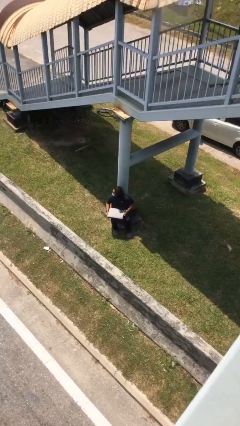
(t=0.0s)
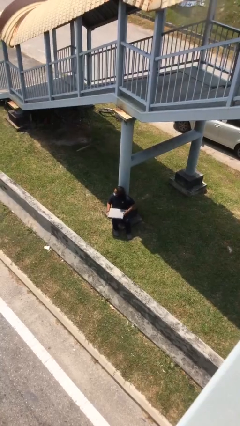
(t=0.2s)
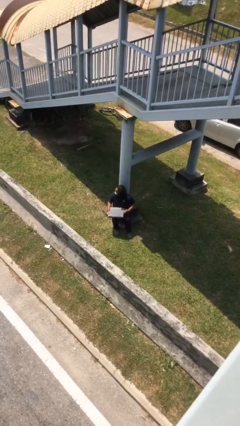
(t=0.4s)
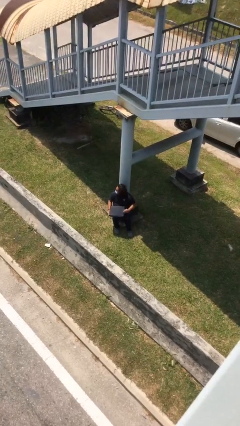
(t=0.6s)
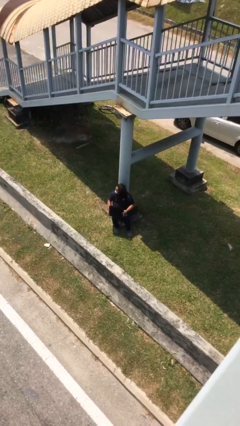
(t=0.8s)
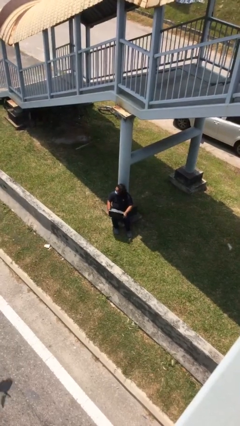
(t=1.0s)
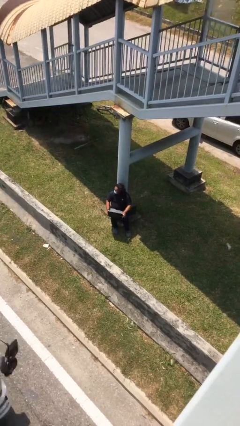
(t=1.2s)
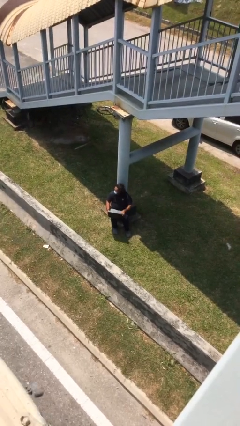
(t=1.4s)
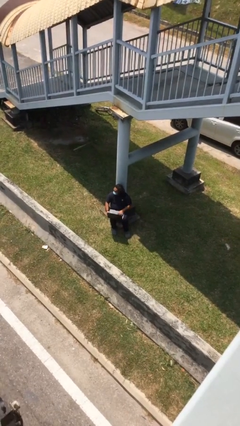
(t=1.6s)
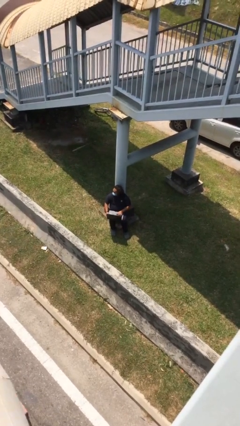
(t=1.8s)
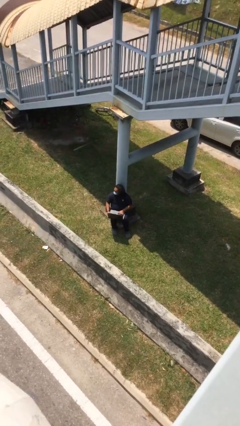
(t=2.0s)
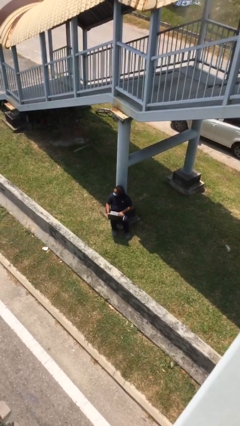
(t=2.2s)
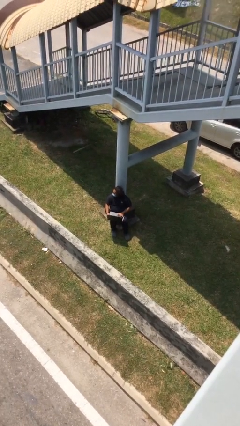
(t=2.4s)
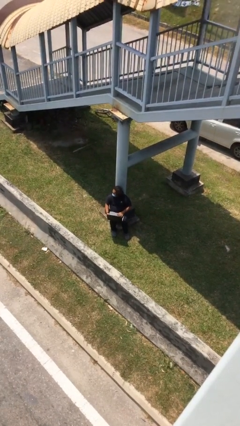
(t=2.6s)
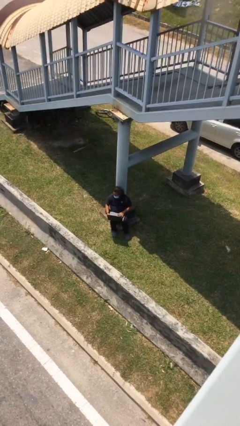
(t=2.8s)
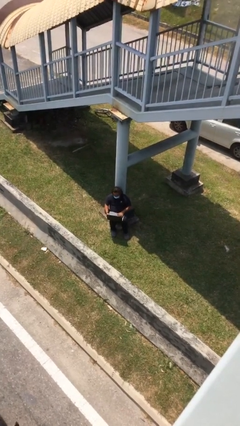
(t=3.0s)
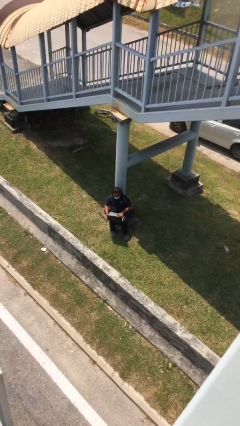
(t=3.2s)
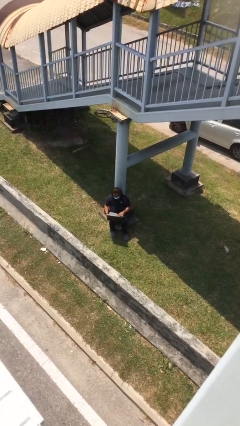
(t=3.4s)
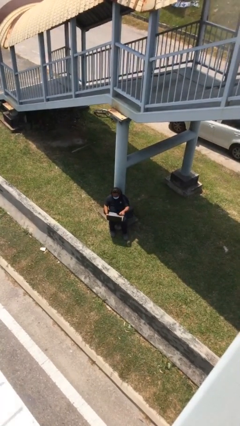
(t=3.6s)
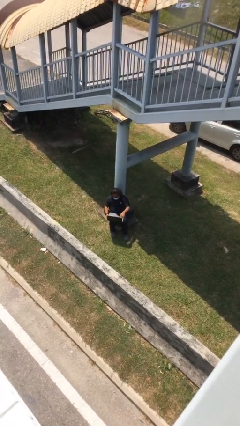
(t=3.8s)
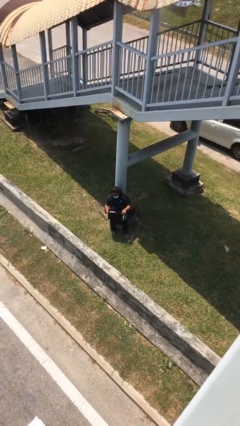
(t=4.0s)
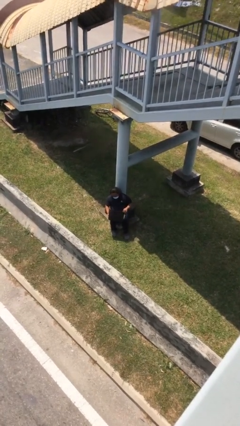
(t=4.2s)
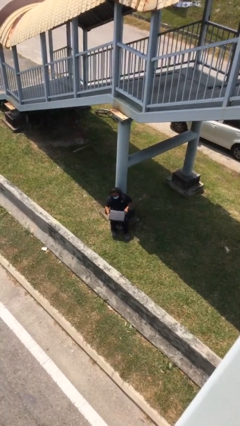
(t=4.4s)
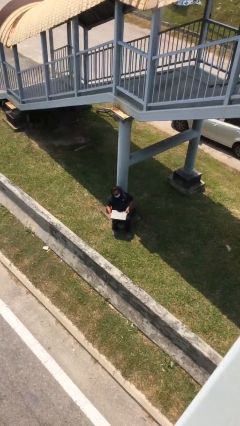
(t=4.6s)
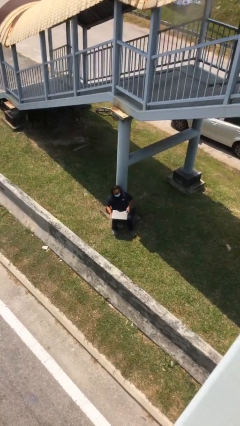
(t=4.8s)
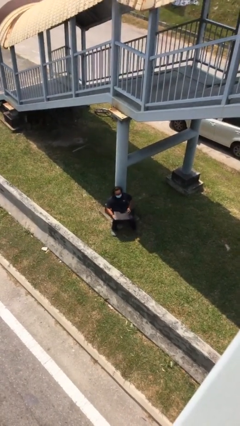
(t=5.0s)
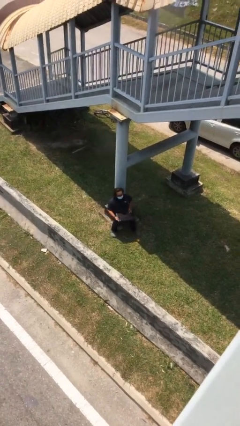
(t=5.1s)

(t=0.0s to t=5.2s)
person interacts with laptop

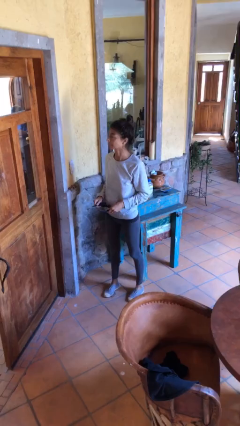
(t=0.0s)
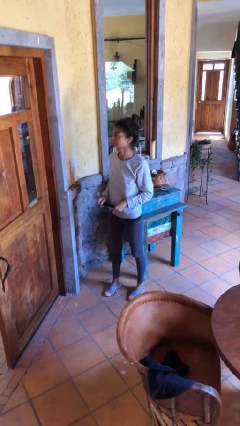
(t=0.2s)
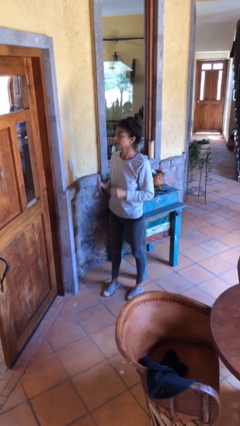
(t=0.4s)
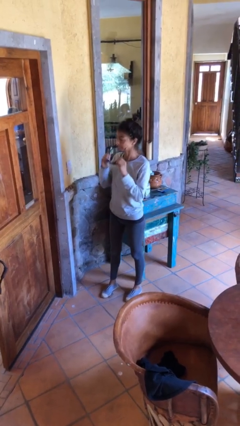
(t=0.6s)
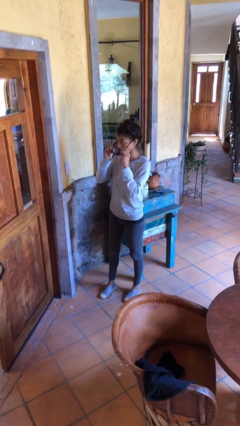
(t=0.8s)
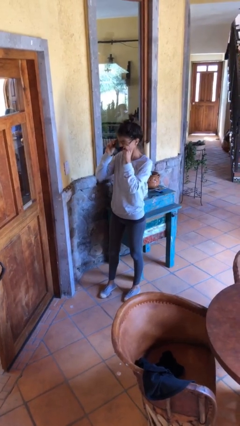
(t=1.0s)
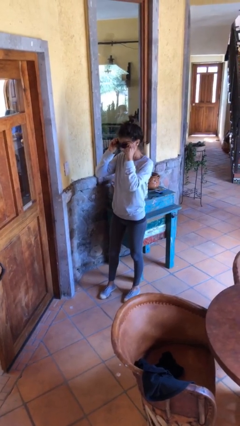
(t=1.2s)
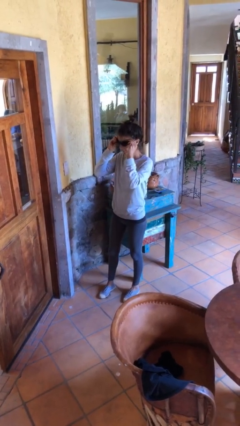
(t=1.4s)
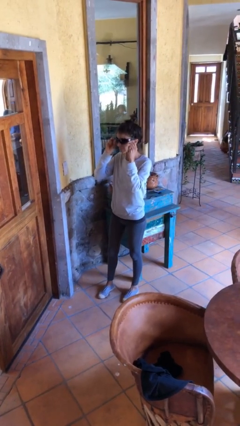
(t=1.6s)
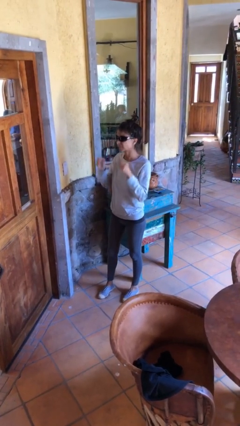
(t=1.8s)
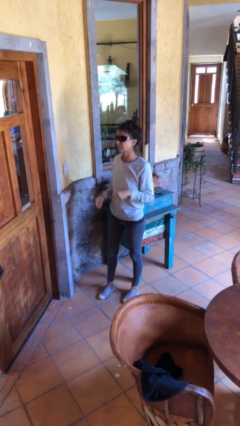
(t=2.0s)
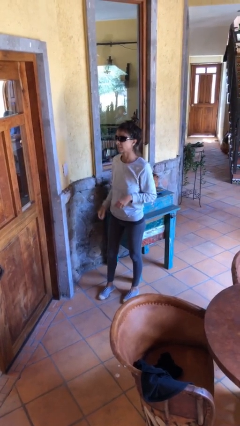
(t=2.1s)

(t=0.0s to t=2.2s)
person puts on sunglasses

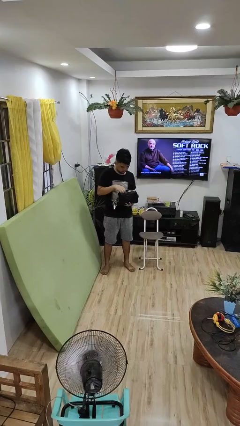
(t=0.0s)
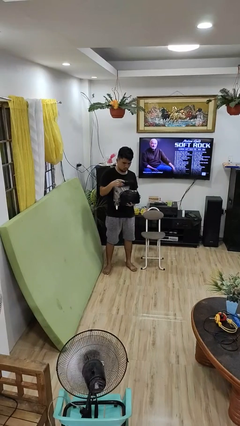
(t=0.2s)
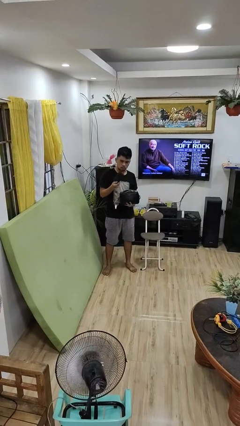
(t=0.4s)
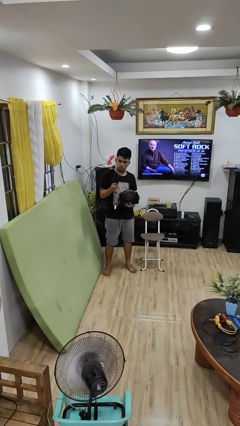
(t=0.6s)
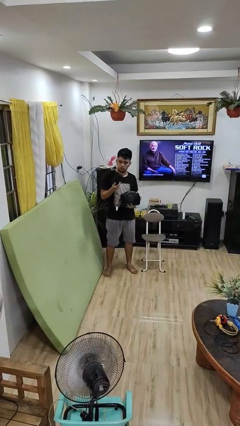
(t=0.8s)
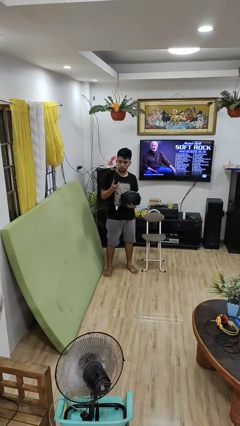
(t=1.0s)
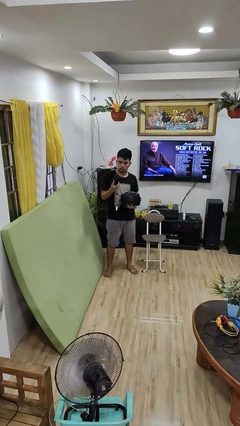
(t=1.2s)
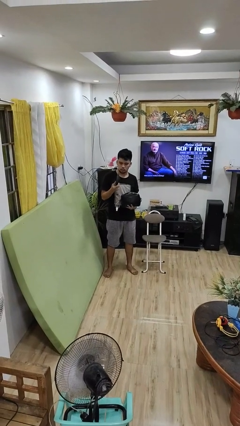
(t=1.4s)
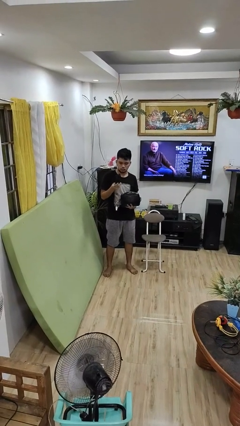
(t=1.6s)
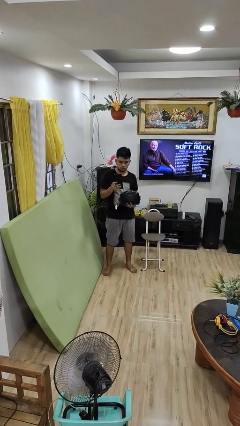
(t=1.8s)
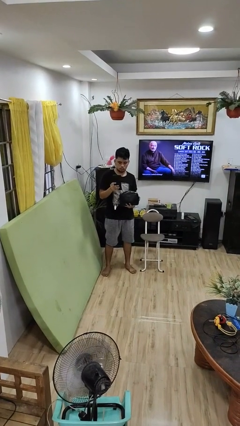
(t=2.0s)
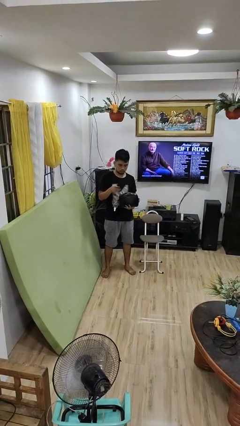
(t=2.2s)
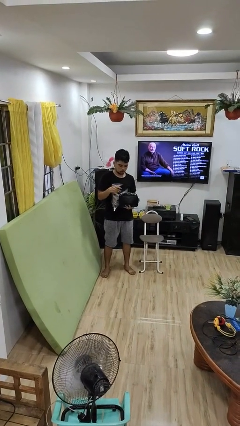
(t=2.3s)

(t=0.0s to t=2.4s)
person takes object from purse

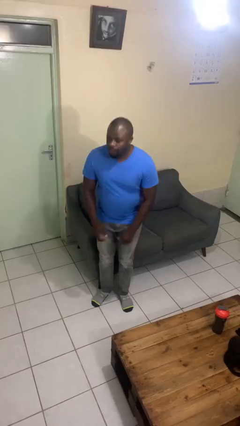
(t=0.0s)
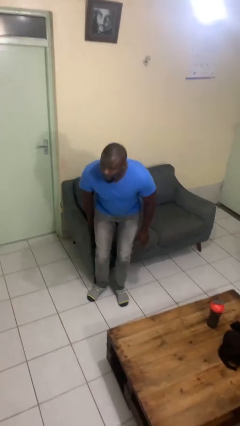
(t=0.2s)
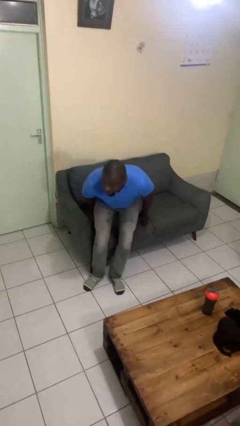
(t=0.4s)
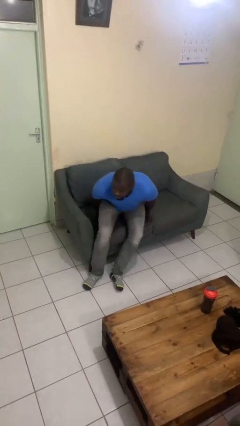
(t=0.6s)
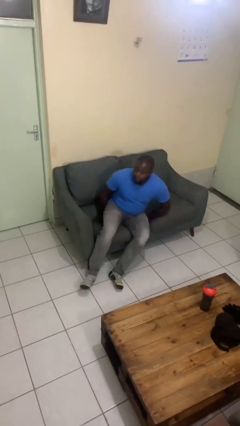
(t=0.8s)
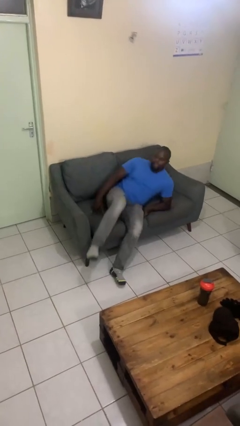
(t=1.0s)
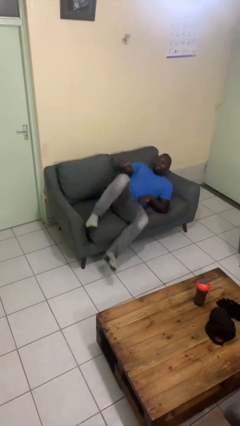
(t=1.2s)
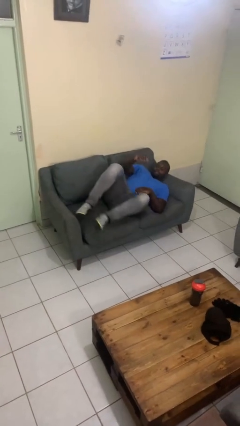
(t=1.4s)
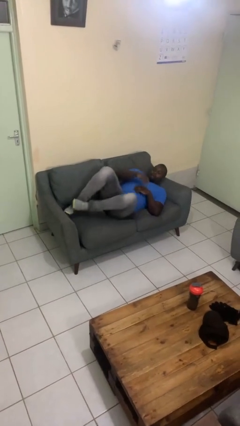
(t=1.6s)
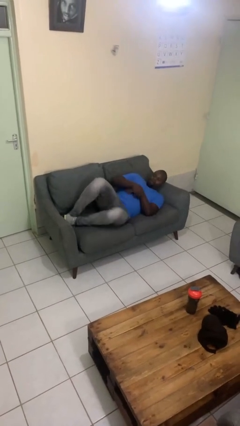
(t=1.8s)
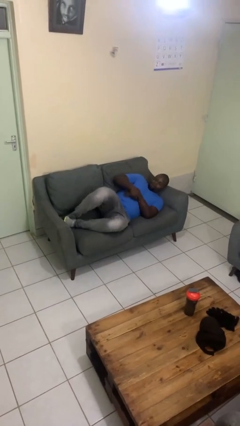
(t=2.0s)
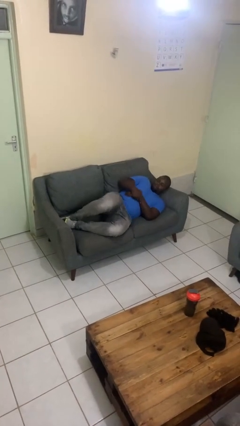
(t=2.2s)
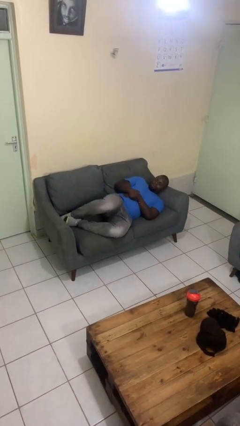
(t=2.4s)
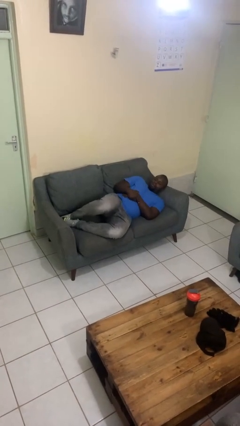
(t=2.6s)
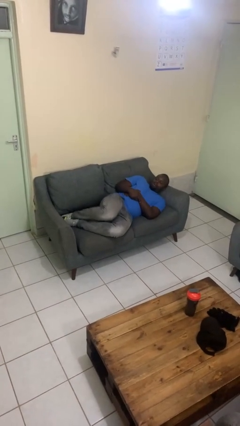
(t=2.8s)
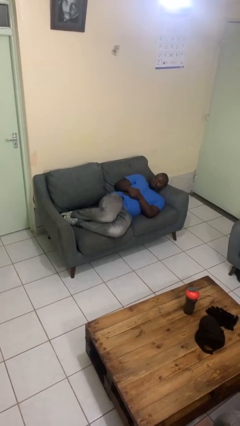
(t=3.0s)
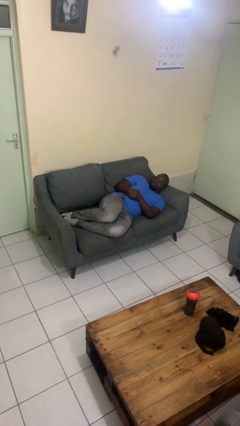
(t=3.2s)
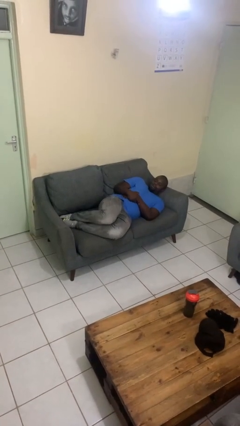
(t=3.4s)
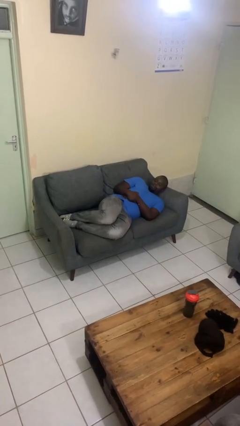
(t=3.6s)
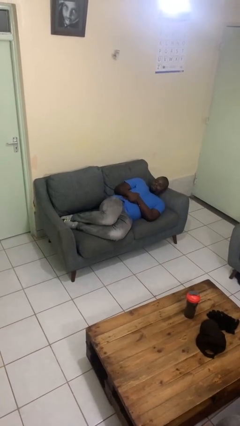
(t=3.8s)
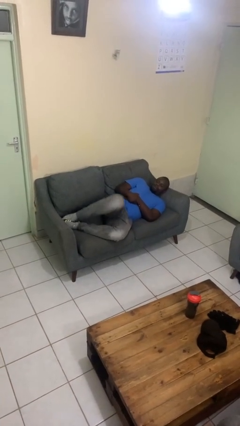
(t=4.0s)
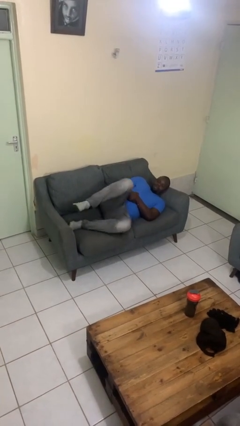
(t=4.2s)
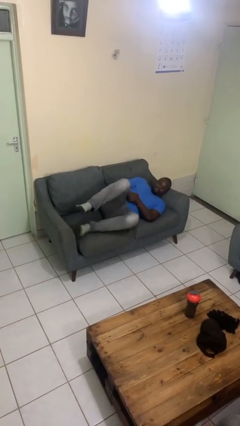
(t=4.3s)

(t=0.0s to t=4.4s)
person lies down on couch

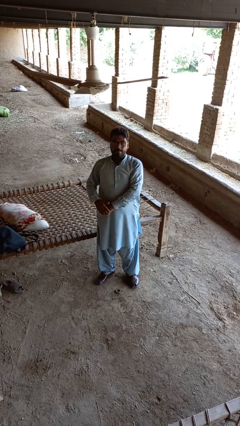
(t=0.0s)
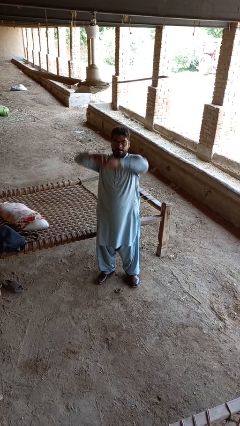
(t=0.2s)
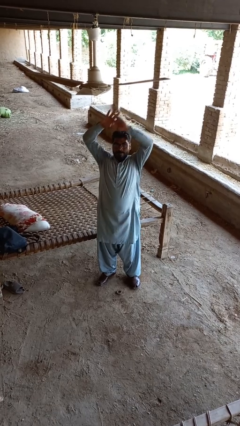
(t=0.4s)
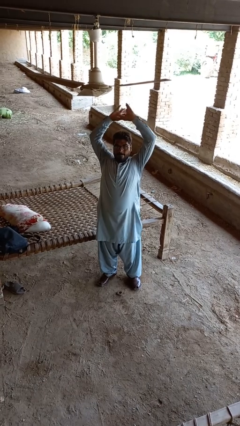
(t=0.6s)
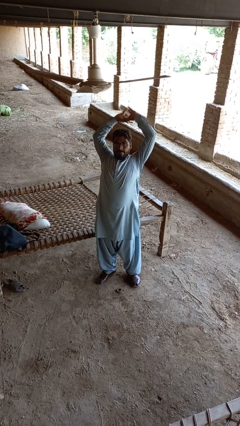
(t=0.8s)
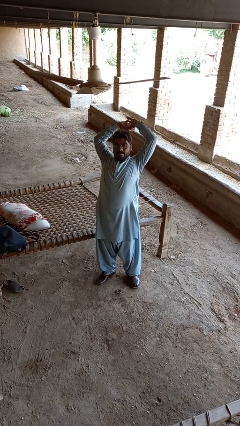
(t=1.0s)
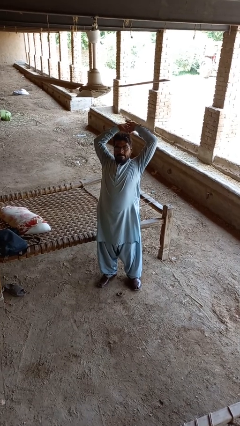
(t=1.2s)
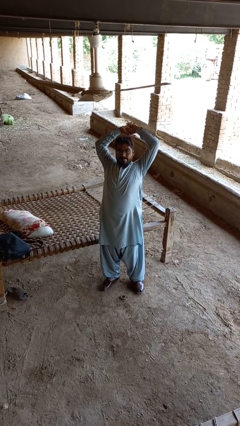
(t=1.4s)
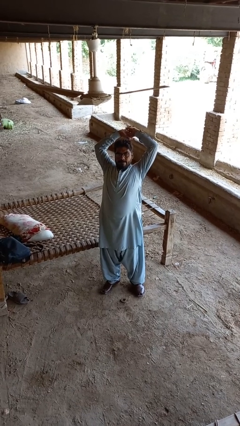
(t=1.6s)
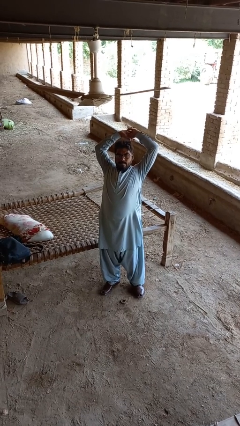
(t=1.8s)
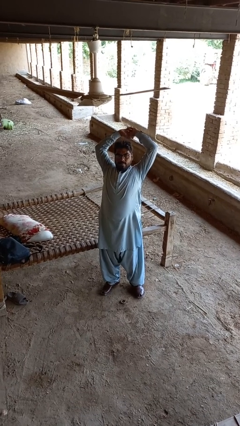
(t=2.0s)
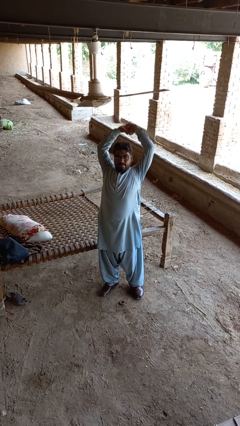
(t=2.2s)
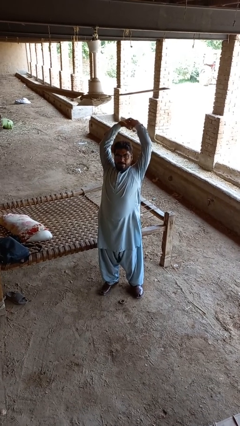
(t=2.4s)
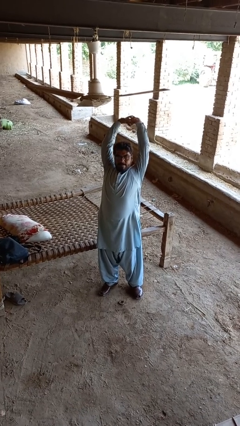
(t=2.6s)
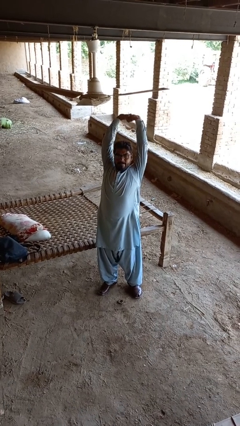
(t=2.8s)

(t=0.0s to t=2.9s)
person stretches arms over head
